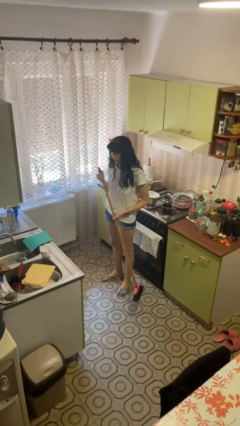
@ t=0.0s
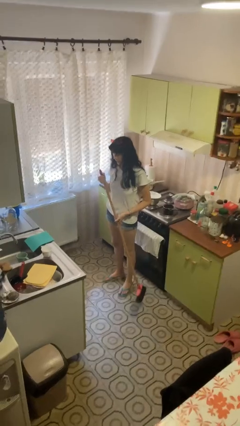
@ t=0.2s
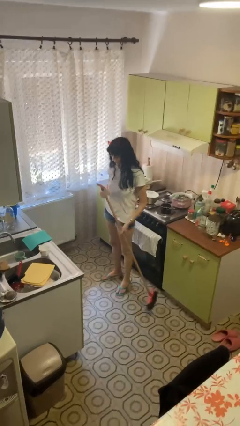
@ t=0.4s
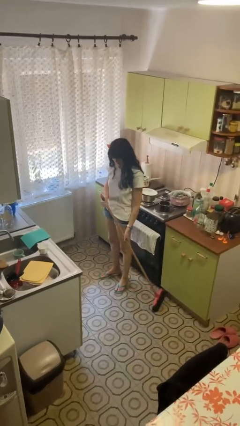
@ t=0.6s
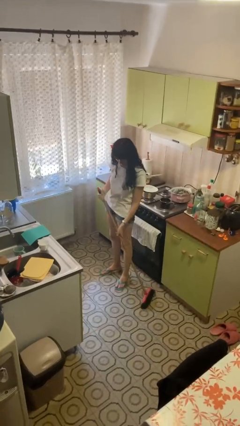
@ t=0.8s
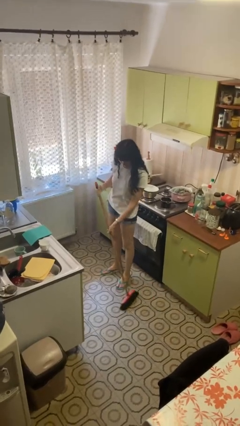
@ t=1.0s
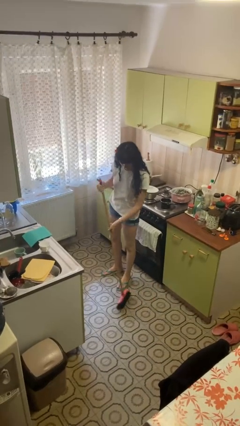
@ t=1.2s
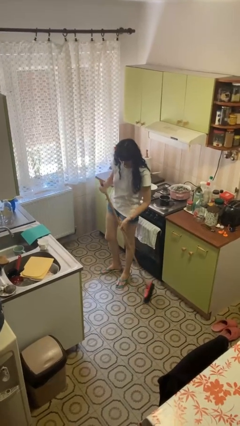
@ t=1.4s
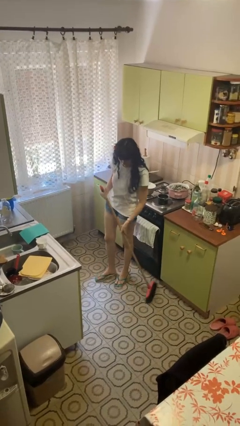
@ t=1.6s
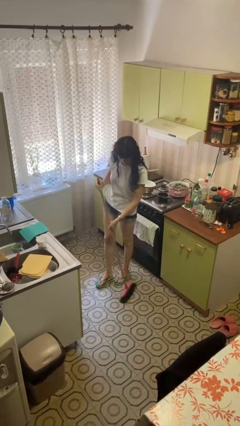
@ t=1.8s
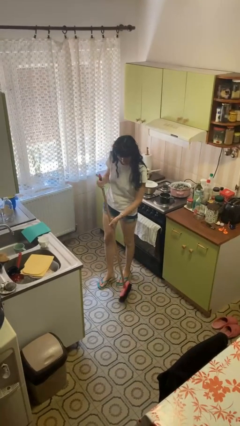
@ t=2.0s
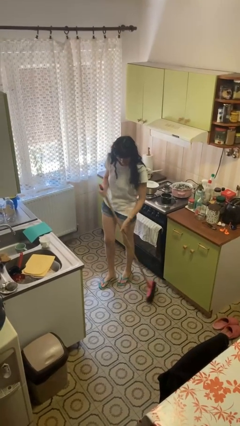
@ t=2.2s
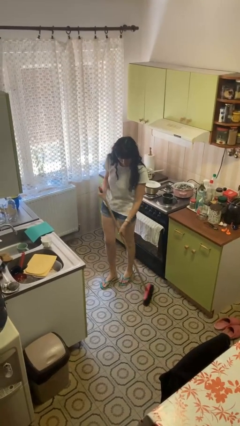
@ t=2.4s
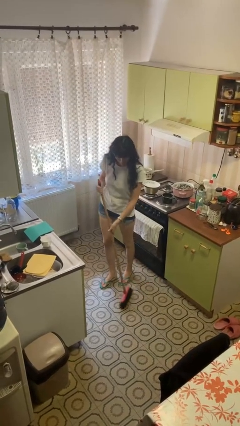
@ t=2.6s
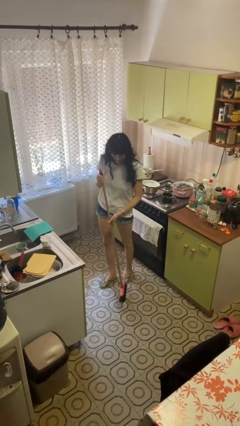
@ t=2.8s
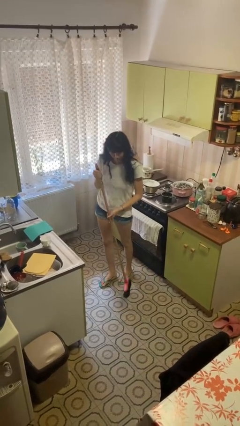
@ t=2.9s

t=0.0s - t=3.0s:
person sweeps floor

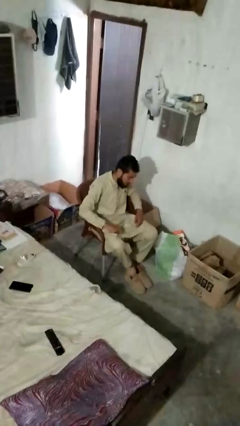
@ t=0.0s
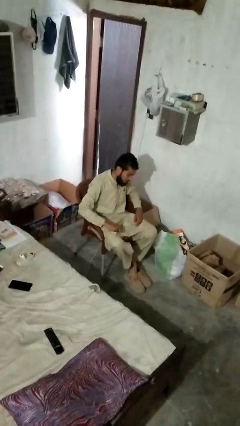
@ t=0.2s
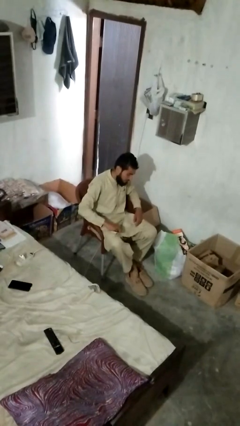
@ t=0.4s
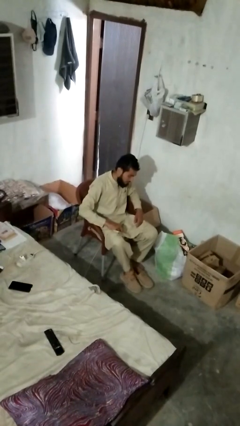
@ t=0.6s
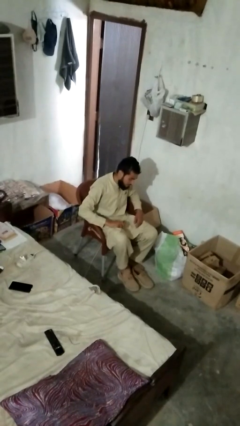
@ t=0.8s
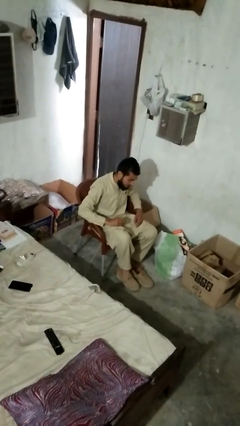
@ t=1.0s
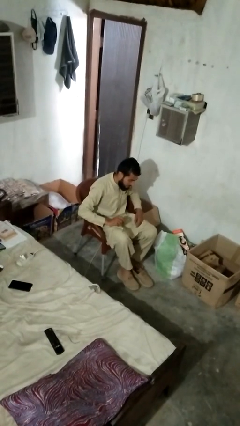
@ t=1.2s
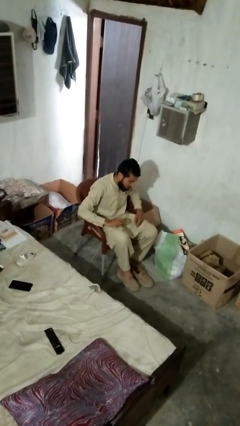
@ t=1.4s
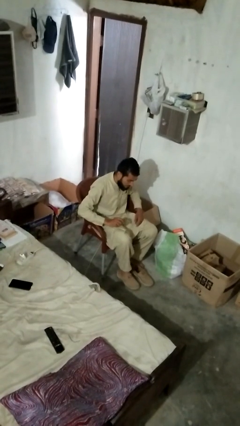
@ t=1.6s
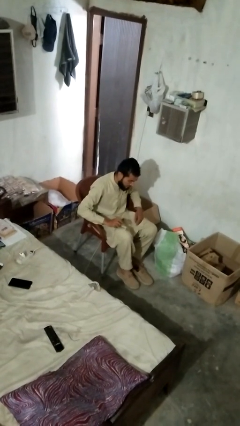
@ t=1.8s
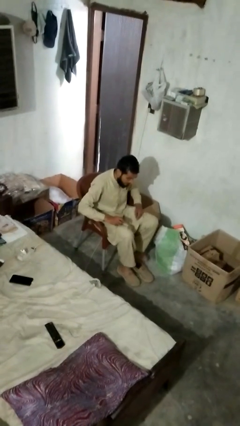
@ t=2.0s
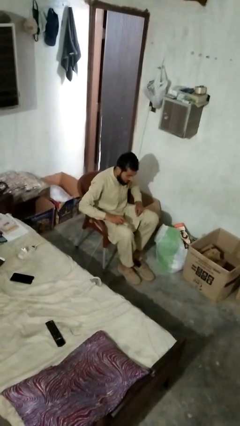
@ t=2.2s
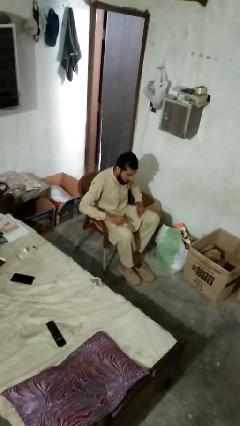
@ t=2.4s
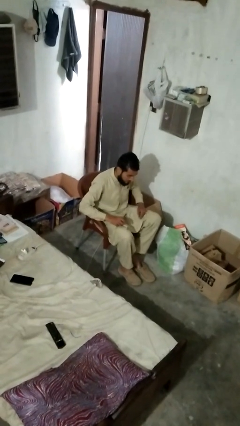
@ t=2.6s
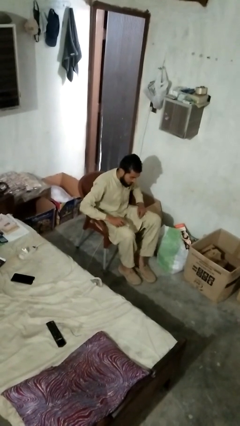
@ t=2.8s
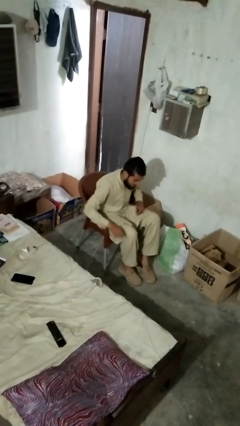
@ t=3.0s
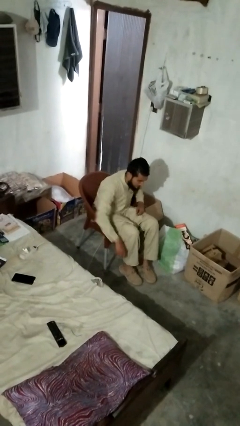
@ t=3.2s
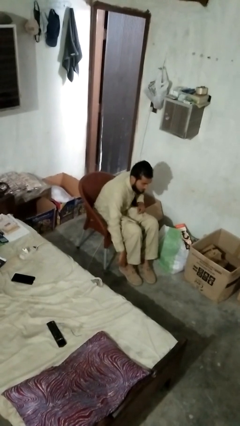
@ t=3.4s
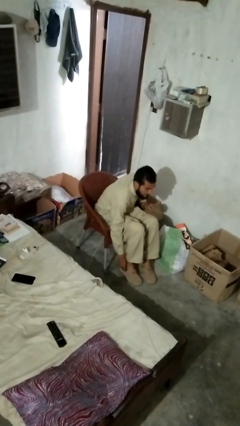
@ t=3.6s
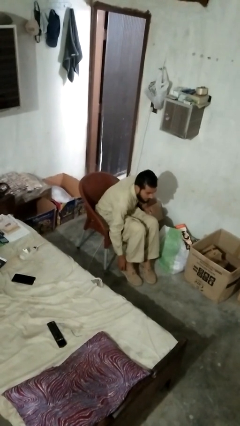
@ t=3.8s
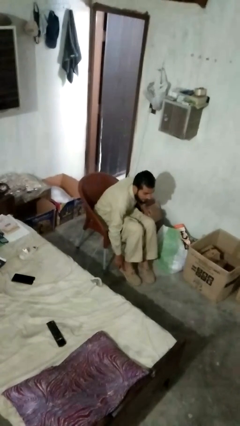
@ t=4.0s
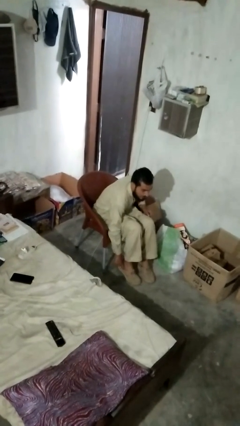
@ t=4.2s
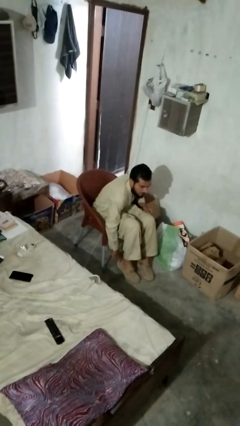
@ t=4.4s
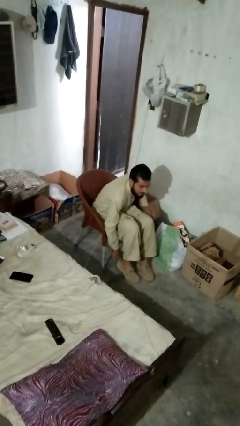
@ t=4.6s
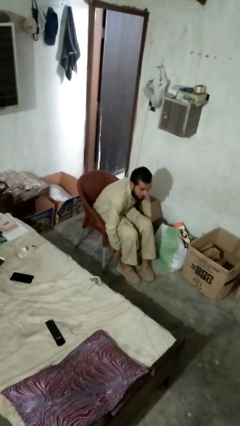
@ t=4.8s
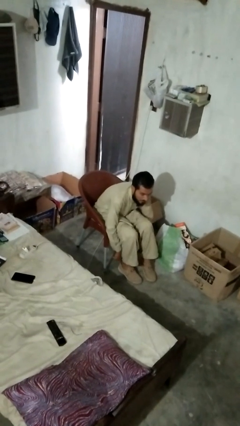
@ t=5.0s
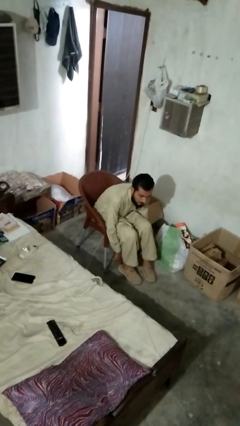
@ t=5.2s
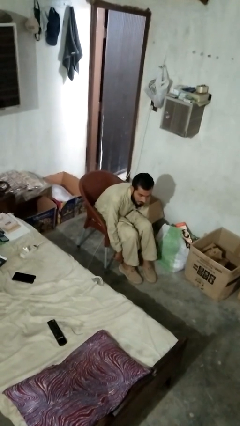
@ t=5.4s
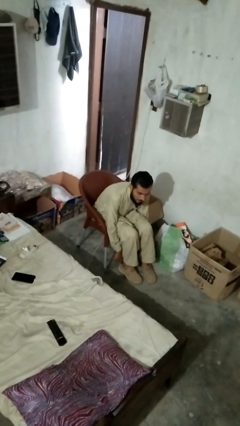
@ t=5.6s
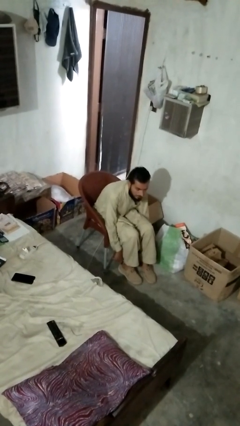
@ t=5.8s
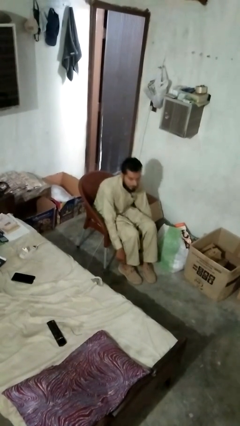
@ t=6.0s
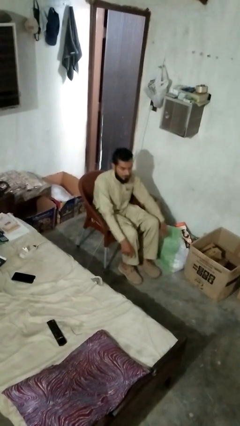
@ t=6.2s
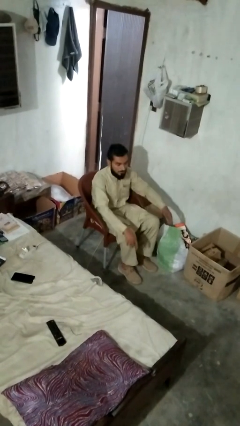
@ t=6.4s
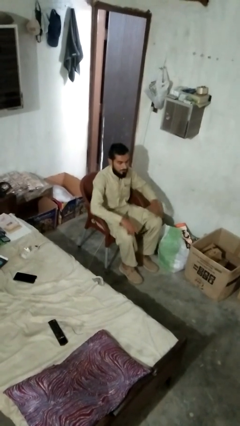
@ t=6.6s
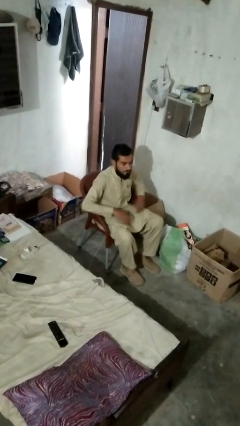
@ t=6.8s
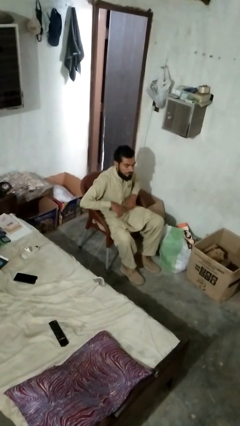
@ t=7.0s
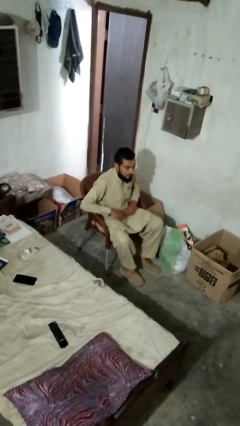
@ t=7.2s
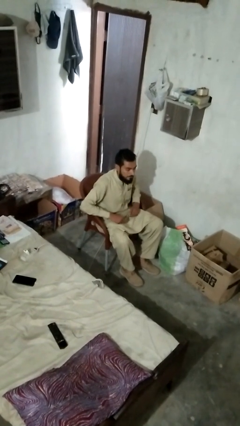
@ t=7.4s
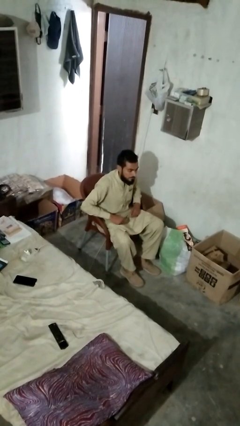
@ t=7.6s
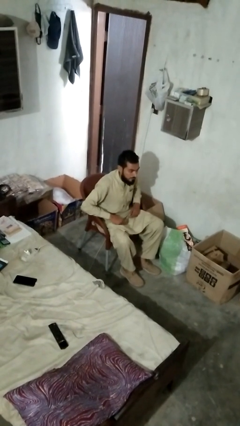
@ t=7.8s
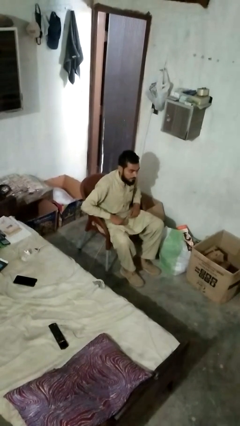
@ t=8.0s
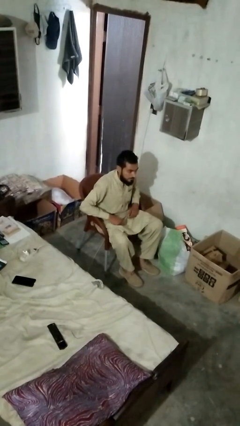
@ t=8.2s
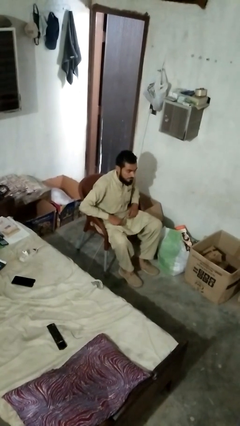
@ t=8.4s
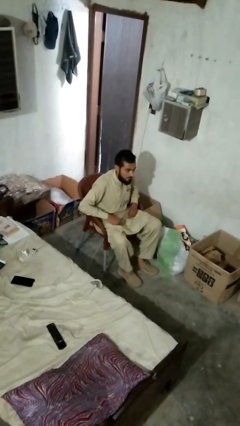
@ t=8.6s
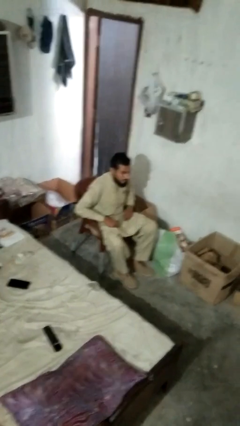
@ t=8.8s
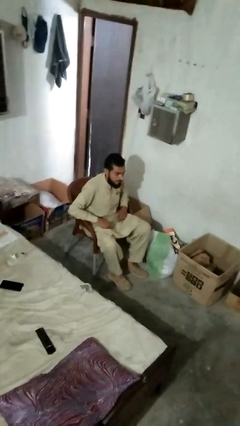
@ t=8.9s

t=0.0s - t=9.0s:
person puts on boots

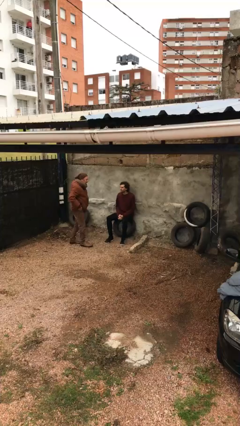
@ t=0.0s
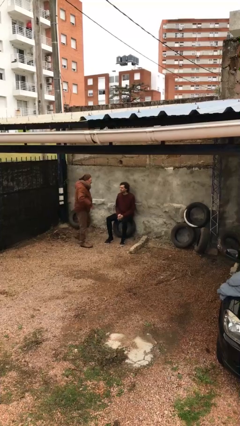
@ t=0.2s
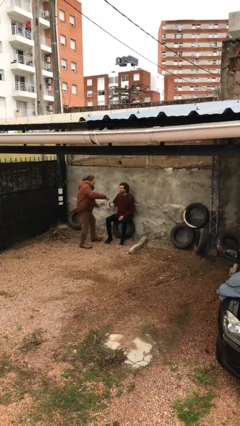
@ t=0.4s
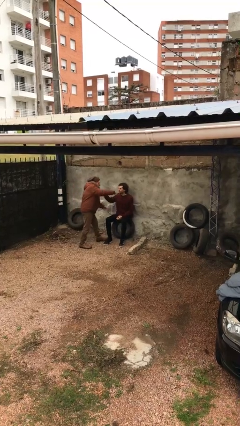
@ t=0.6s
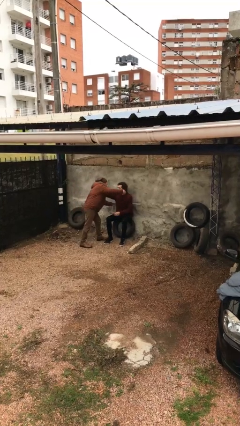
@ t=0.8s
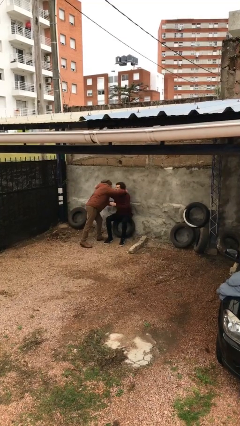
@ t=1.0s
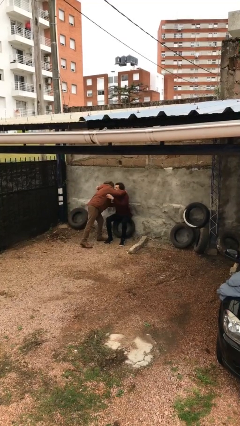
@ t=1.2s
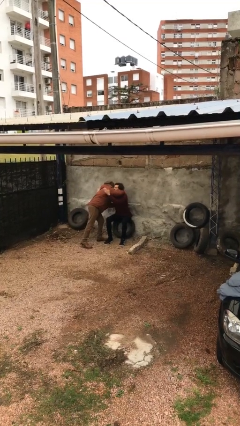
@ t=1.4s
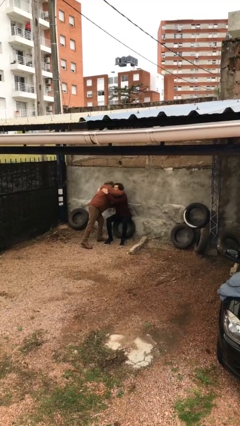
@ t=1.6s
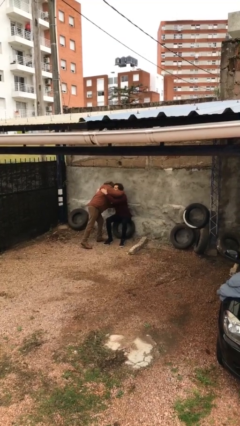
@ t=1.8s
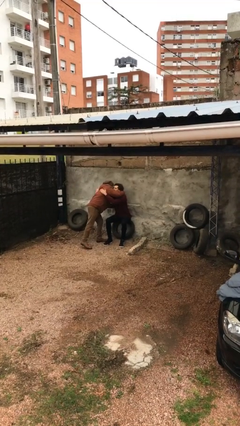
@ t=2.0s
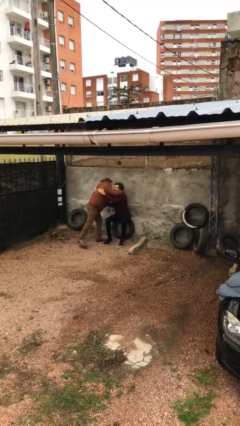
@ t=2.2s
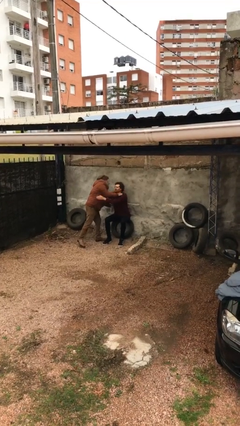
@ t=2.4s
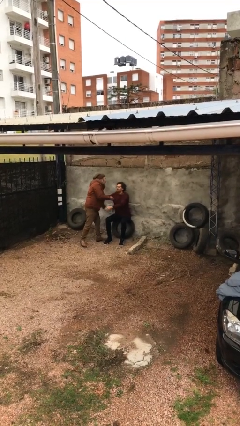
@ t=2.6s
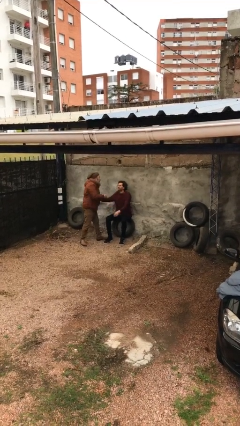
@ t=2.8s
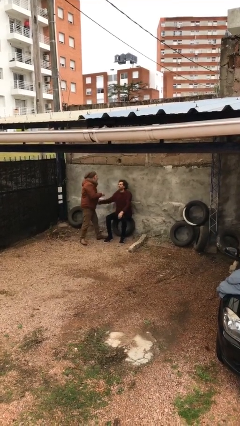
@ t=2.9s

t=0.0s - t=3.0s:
person embraces person

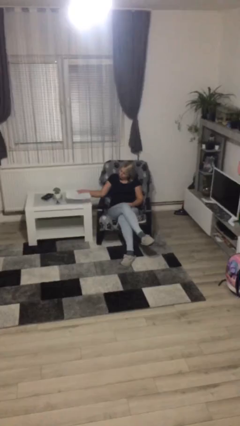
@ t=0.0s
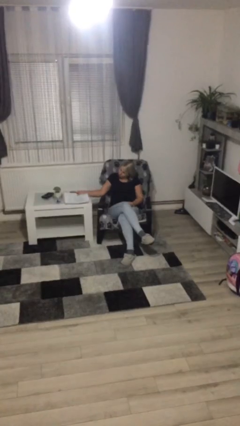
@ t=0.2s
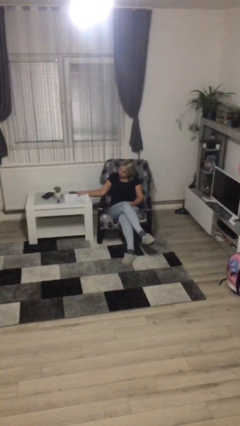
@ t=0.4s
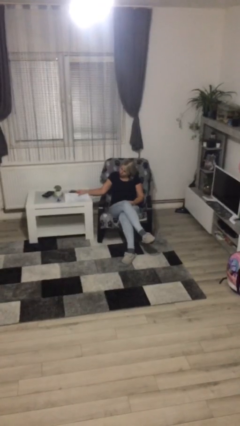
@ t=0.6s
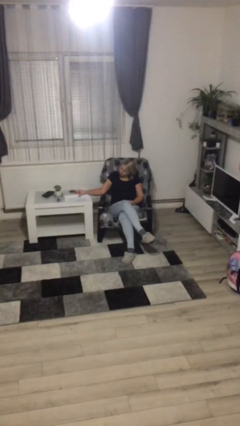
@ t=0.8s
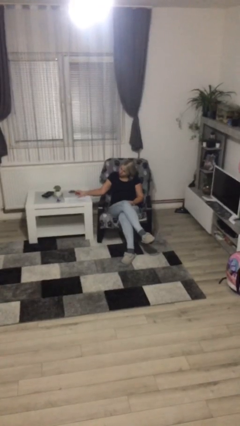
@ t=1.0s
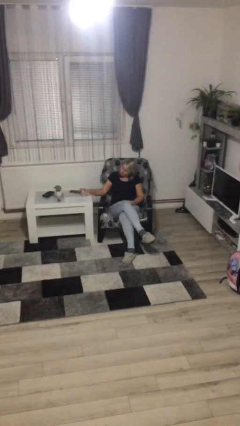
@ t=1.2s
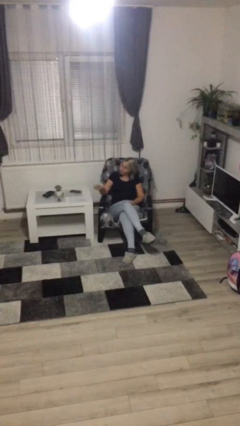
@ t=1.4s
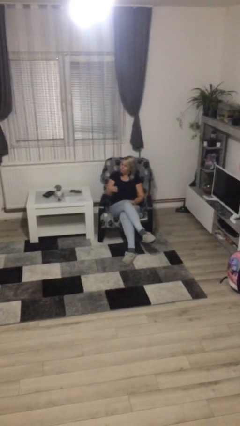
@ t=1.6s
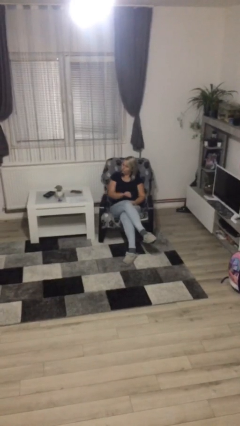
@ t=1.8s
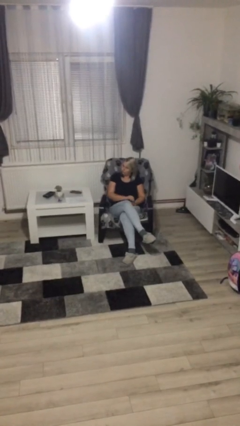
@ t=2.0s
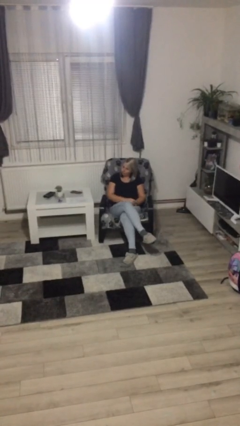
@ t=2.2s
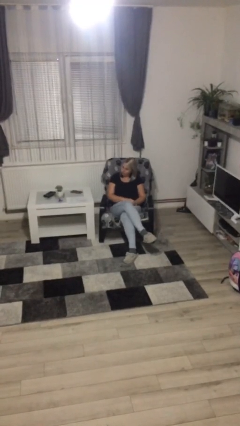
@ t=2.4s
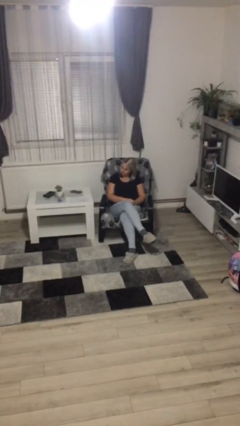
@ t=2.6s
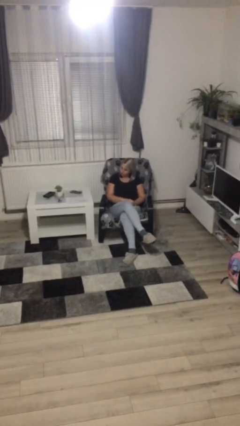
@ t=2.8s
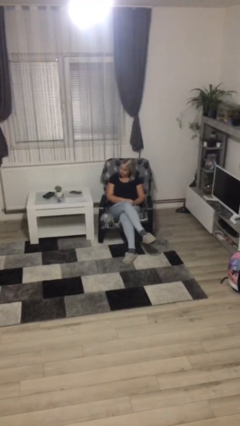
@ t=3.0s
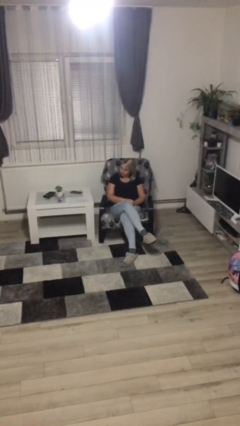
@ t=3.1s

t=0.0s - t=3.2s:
person puts down object on table
